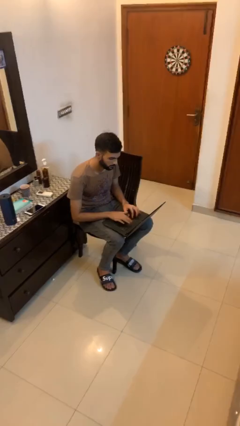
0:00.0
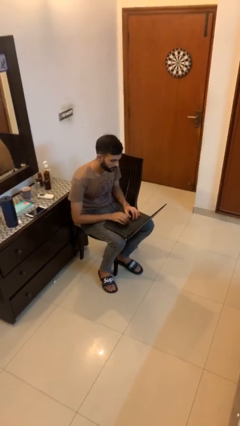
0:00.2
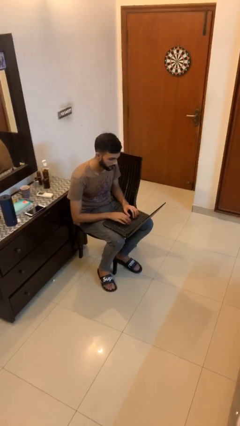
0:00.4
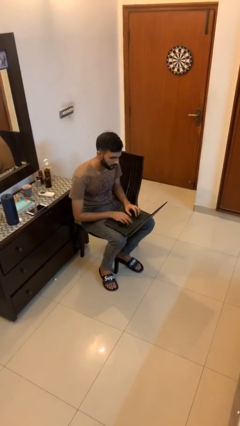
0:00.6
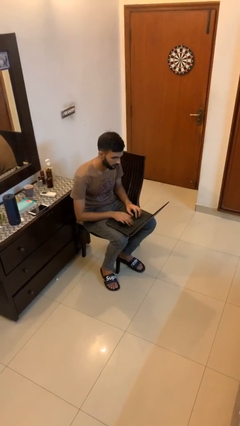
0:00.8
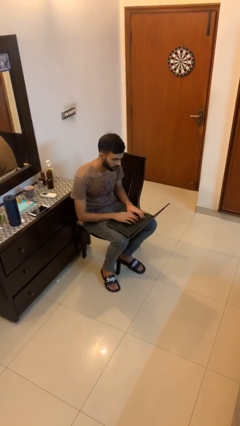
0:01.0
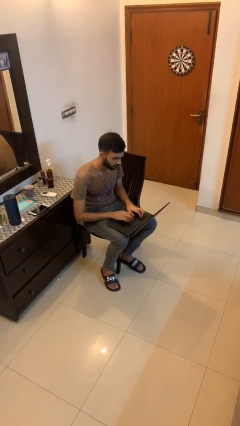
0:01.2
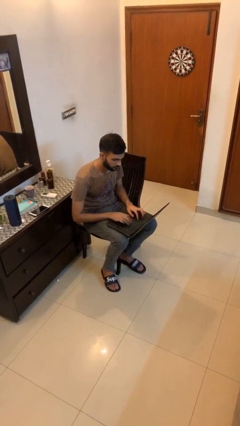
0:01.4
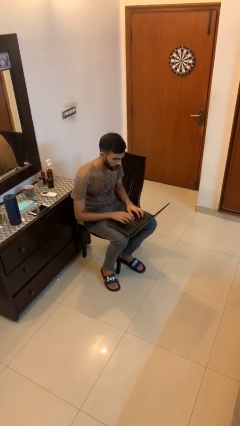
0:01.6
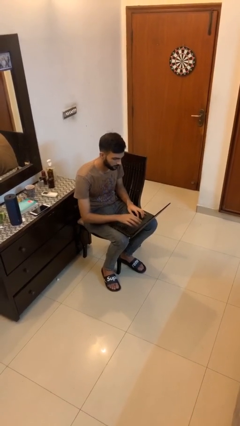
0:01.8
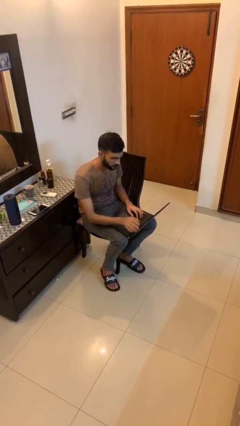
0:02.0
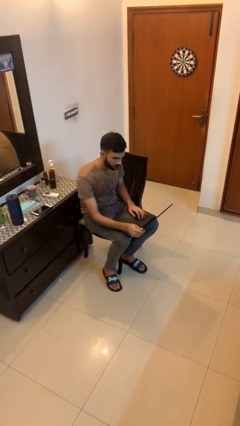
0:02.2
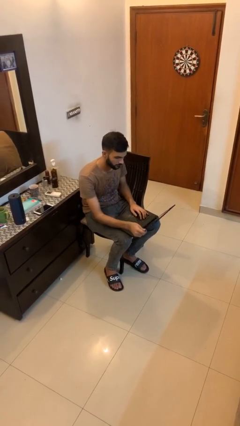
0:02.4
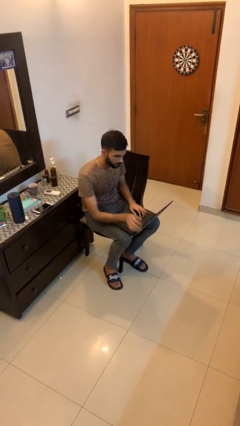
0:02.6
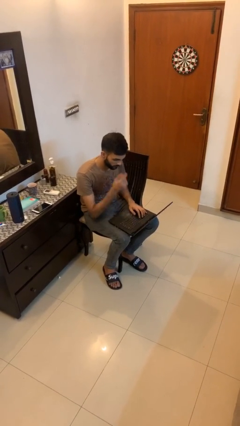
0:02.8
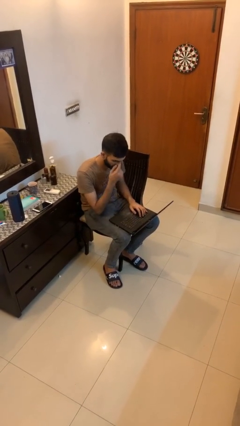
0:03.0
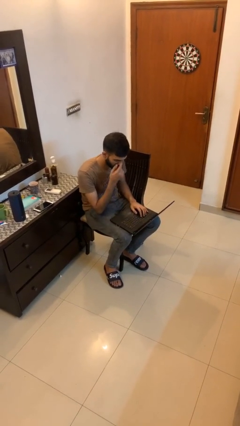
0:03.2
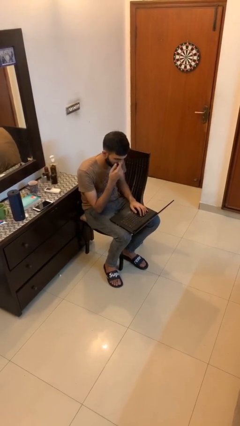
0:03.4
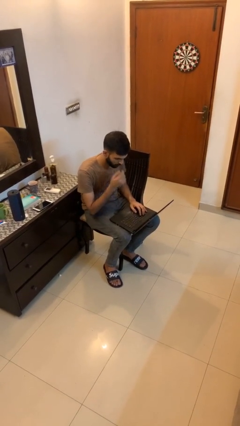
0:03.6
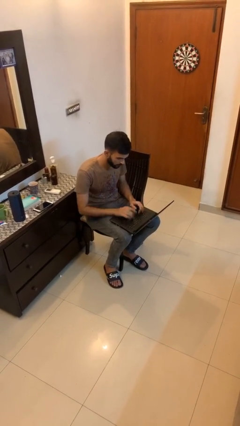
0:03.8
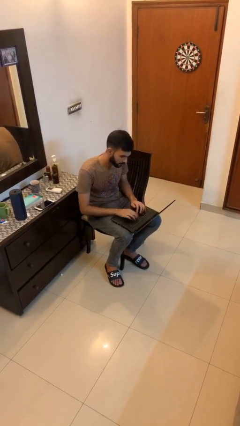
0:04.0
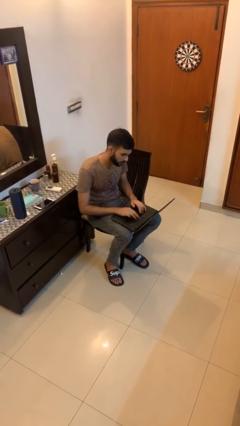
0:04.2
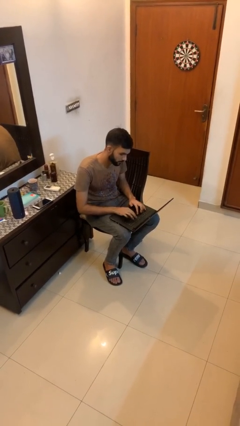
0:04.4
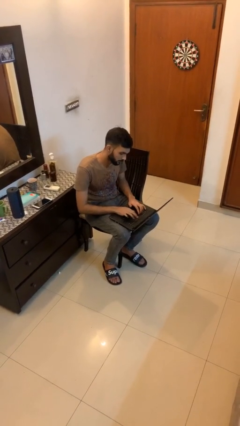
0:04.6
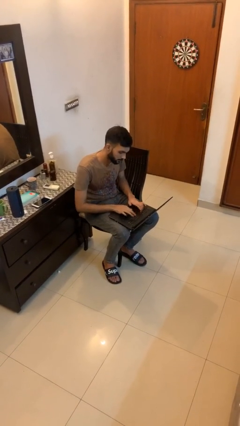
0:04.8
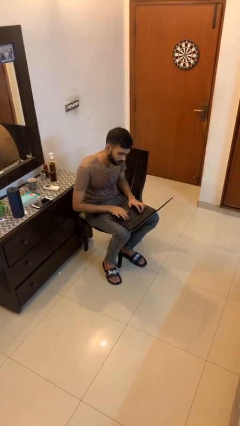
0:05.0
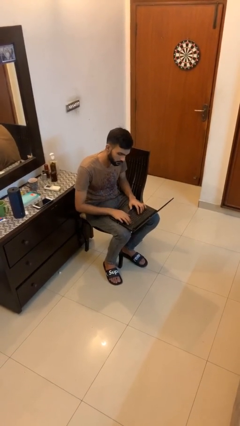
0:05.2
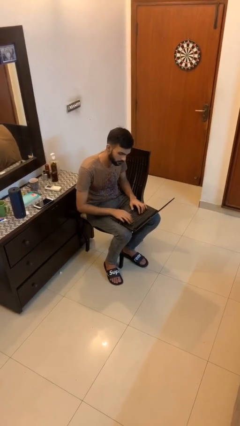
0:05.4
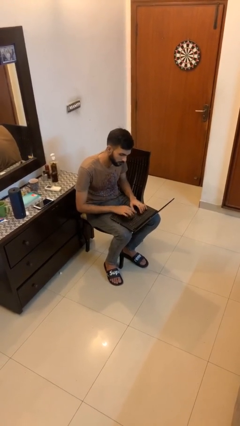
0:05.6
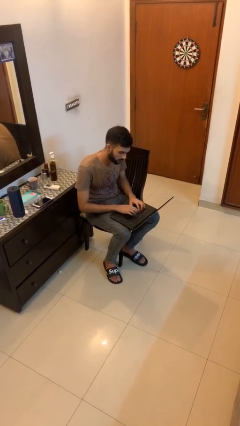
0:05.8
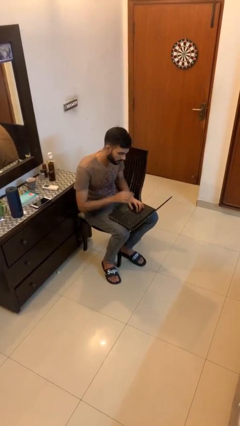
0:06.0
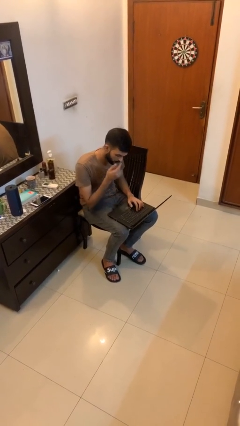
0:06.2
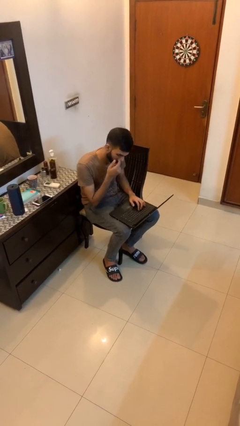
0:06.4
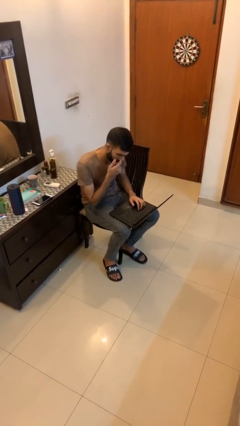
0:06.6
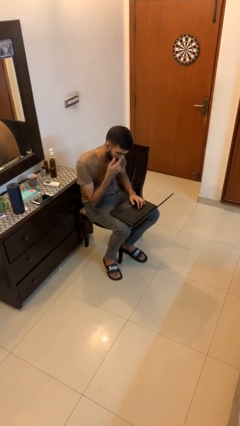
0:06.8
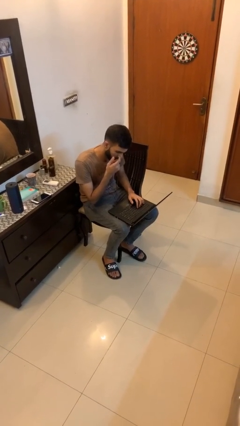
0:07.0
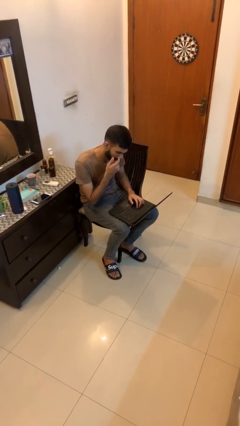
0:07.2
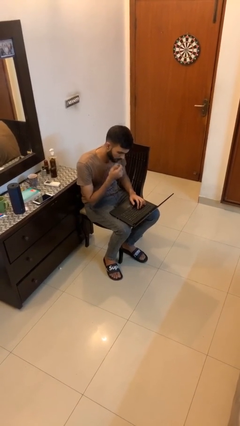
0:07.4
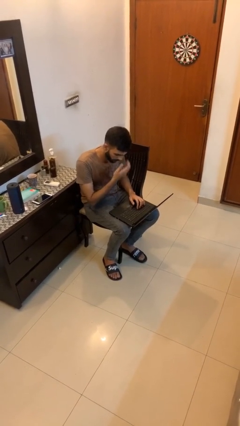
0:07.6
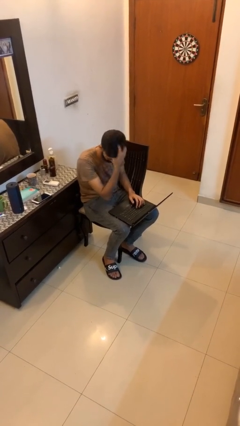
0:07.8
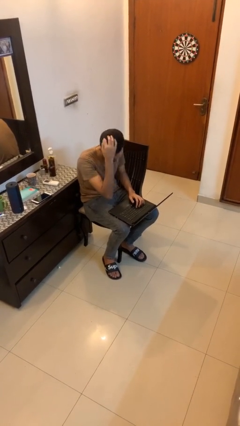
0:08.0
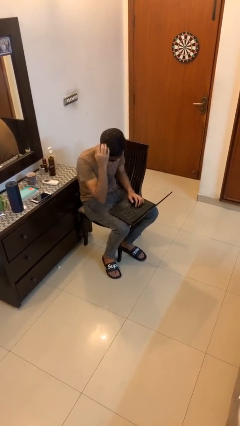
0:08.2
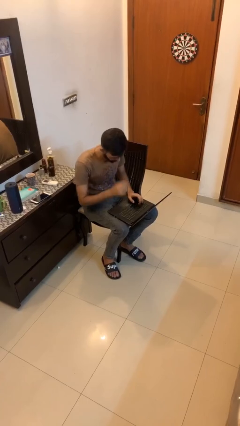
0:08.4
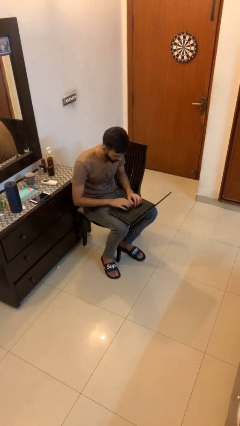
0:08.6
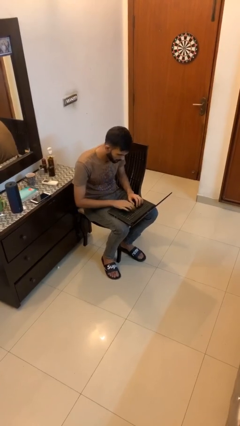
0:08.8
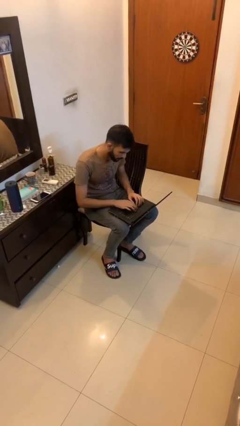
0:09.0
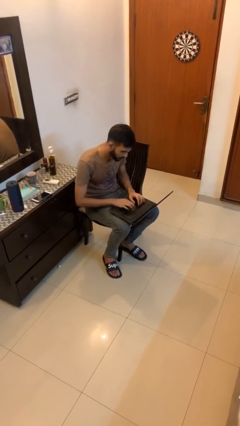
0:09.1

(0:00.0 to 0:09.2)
person interacts with laptop

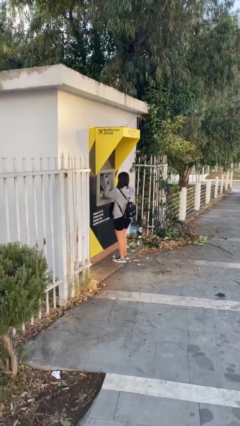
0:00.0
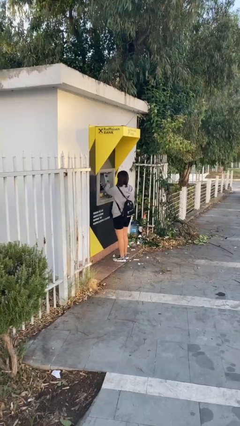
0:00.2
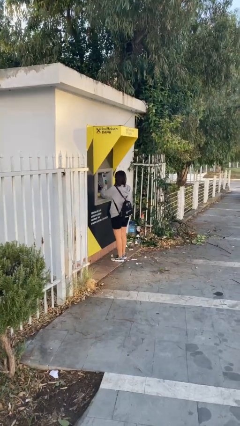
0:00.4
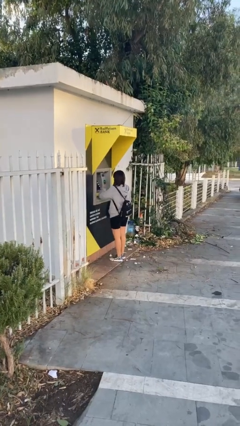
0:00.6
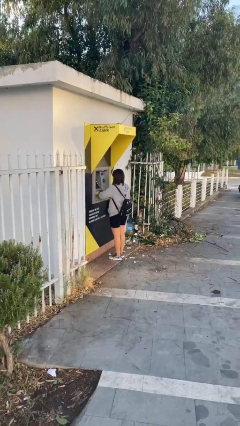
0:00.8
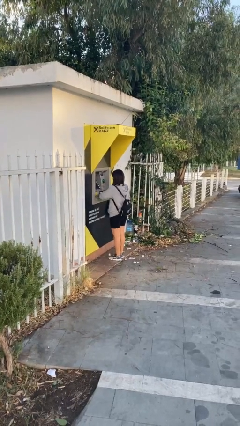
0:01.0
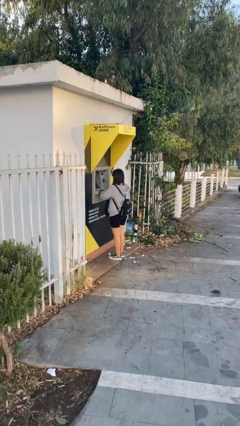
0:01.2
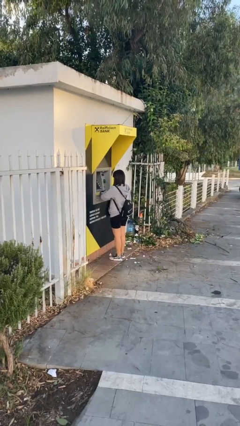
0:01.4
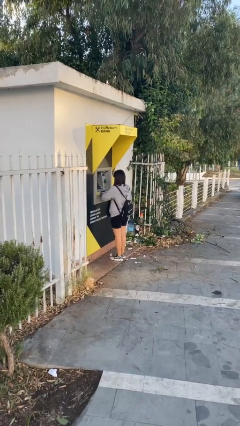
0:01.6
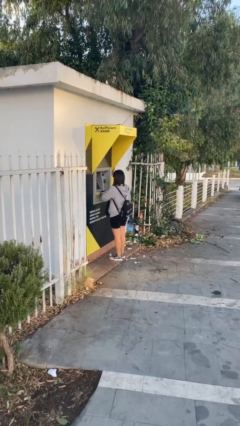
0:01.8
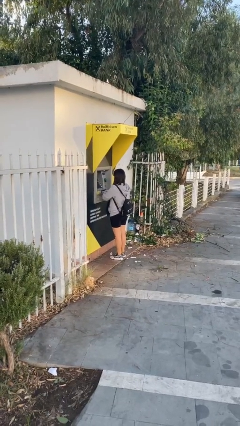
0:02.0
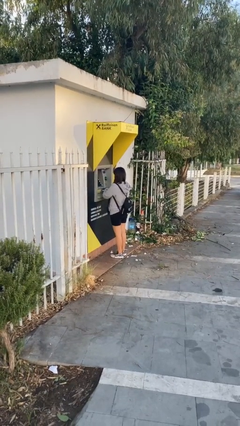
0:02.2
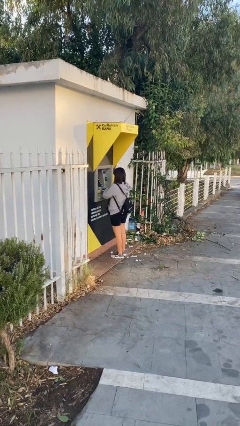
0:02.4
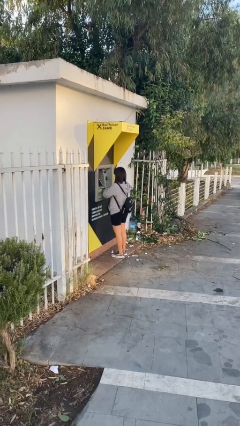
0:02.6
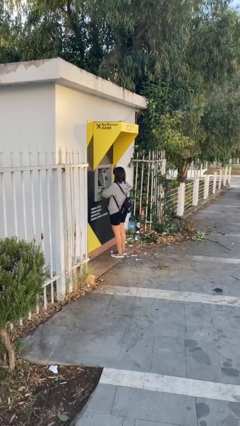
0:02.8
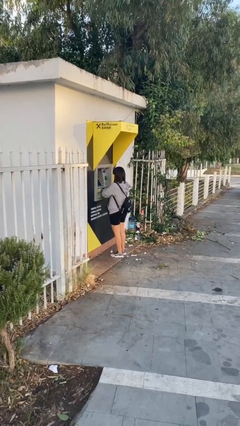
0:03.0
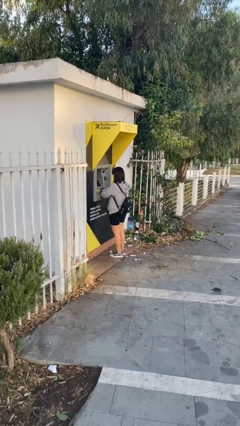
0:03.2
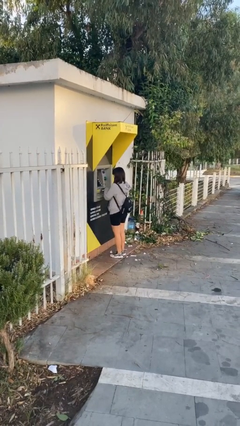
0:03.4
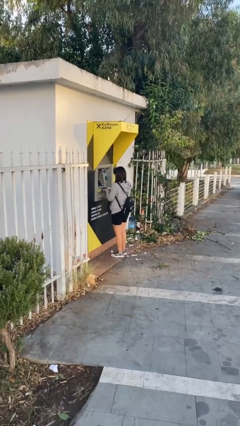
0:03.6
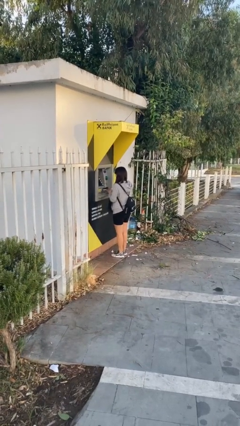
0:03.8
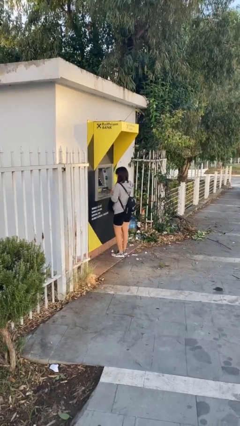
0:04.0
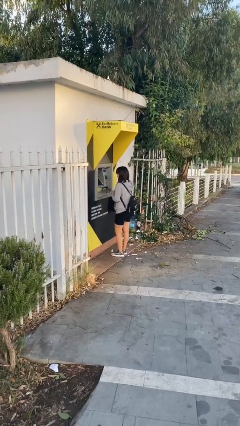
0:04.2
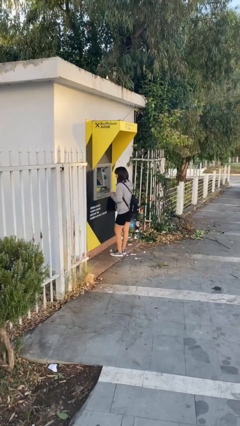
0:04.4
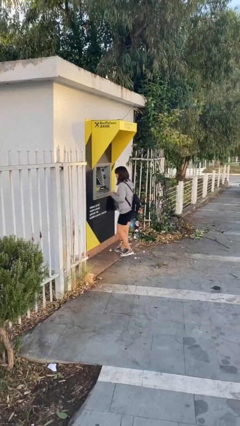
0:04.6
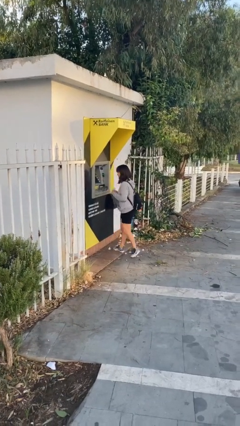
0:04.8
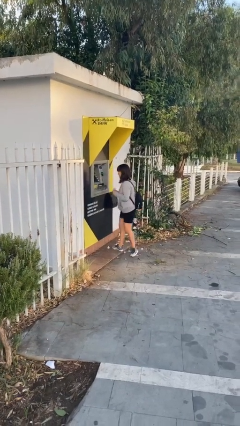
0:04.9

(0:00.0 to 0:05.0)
person purchases from machine

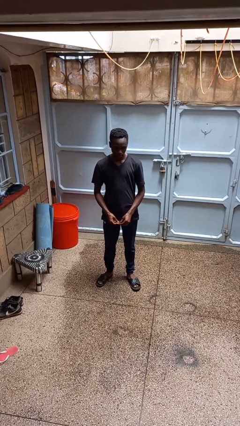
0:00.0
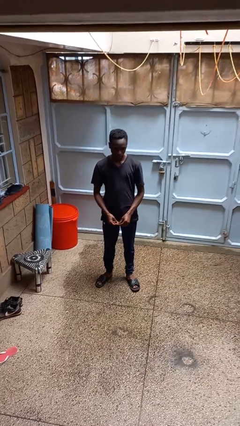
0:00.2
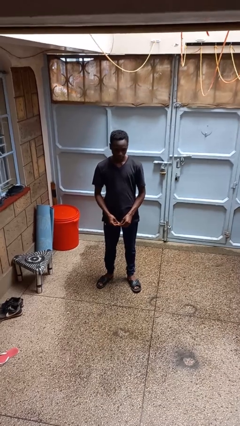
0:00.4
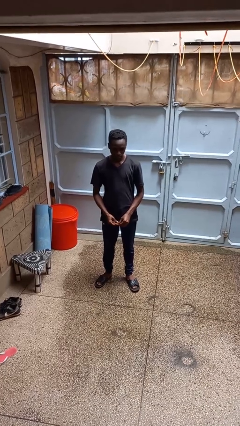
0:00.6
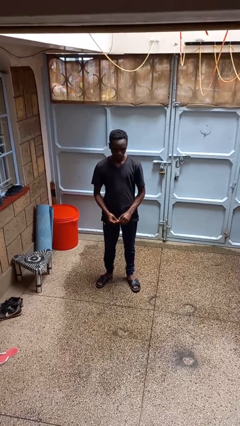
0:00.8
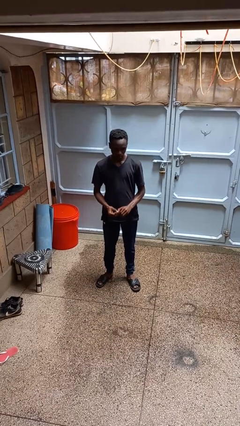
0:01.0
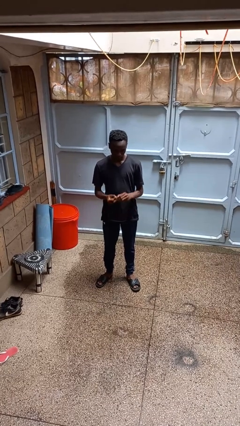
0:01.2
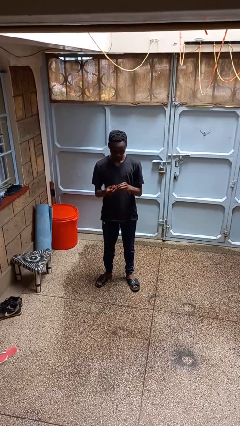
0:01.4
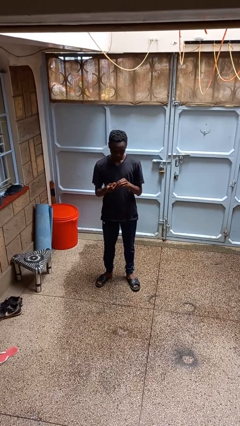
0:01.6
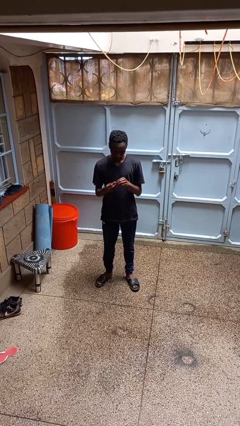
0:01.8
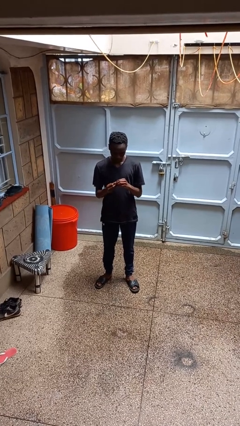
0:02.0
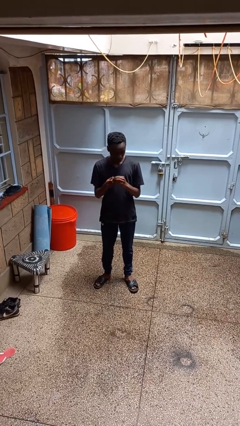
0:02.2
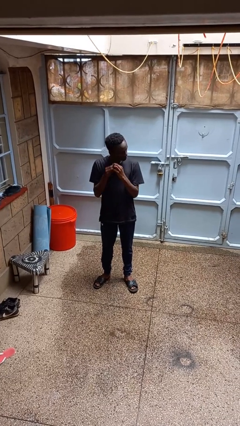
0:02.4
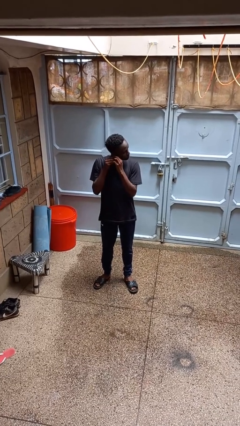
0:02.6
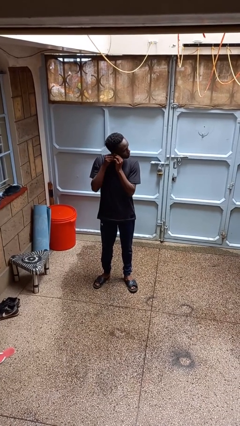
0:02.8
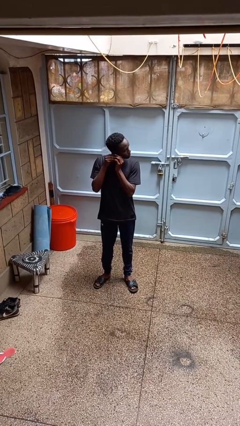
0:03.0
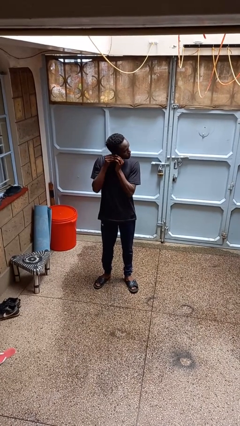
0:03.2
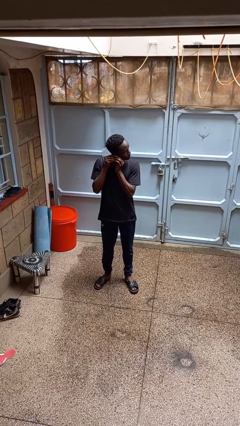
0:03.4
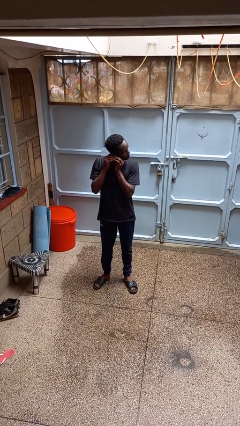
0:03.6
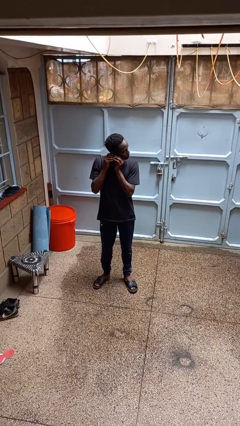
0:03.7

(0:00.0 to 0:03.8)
person puts on earrings

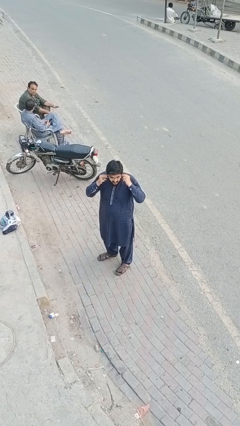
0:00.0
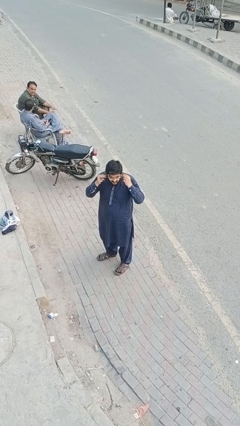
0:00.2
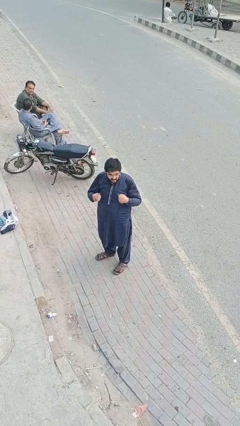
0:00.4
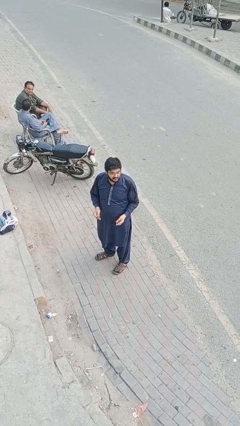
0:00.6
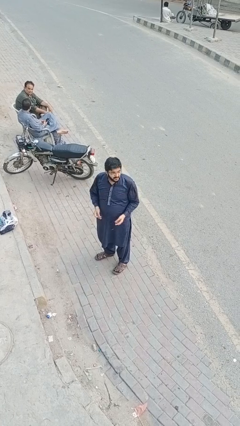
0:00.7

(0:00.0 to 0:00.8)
person takes off headphones
